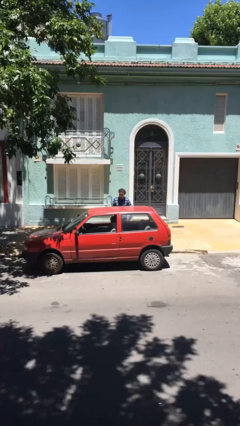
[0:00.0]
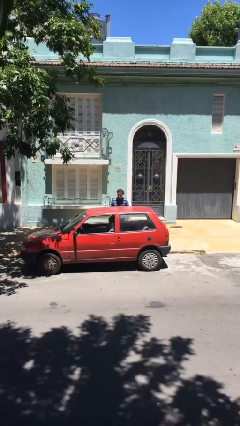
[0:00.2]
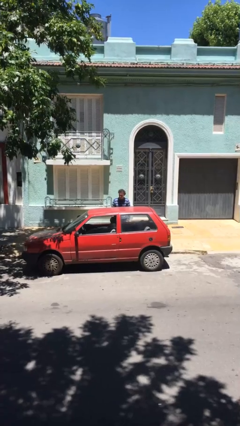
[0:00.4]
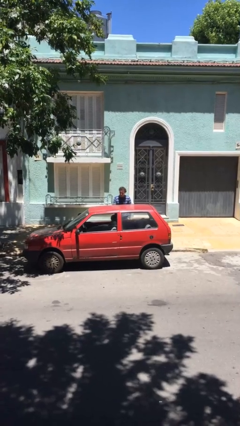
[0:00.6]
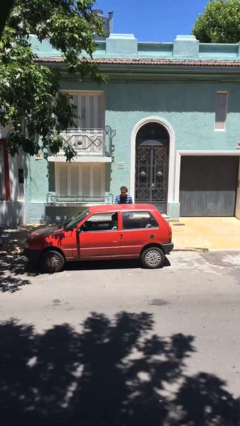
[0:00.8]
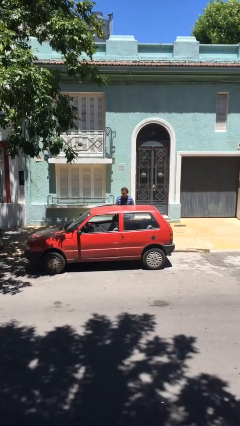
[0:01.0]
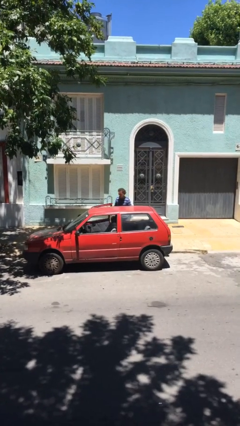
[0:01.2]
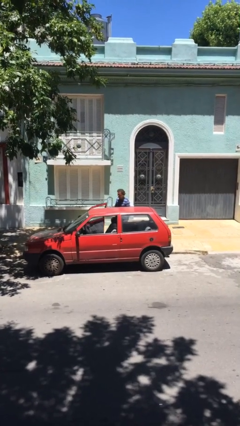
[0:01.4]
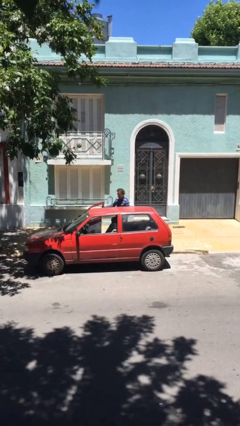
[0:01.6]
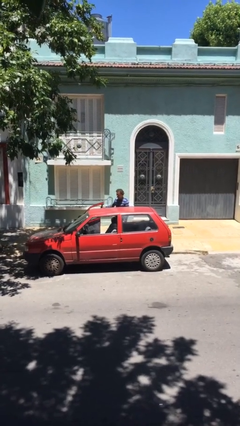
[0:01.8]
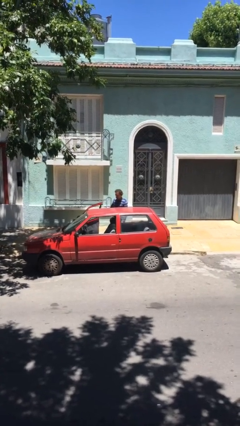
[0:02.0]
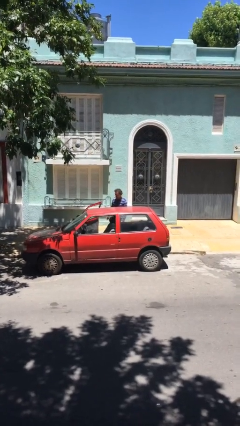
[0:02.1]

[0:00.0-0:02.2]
person opens car door

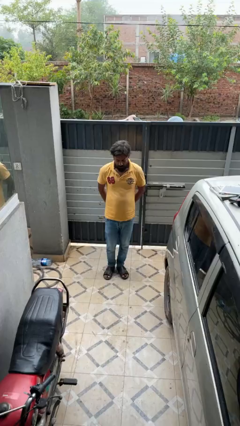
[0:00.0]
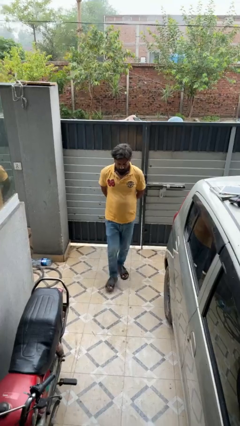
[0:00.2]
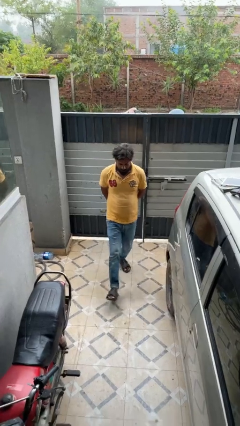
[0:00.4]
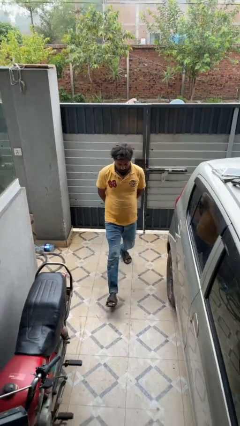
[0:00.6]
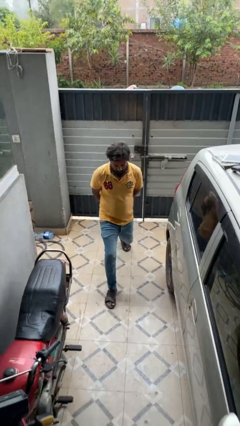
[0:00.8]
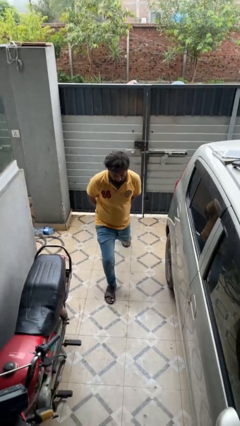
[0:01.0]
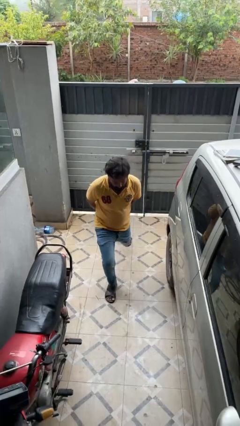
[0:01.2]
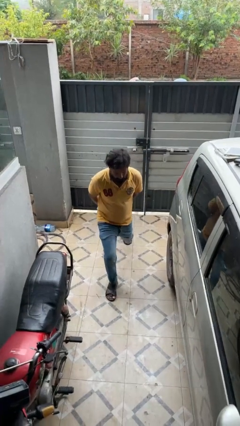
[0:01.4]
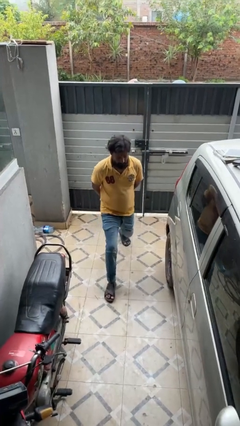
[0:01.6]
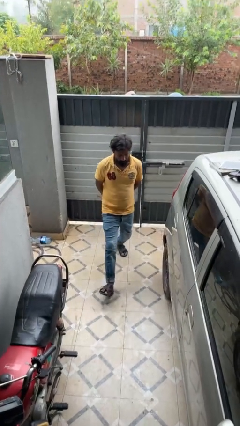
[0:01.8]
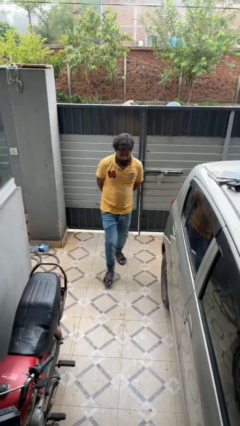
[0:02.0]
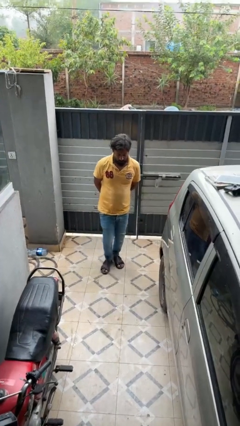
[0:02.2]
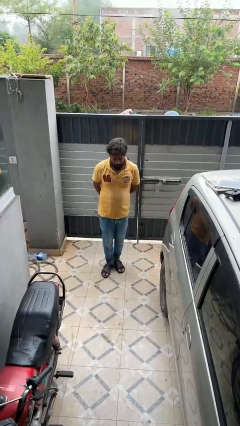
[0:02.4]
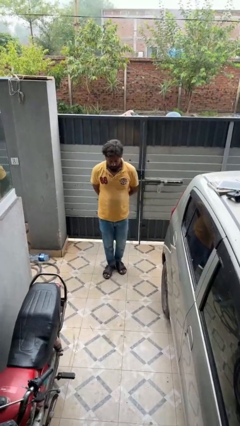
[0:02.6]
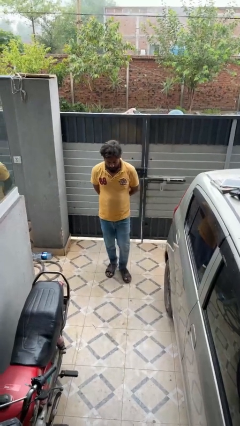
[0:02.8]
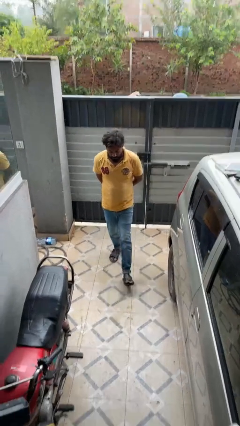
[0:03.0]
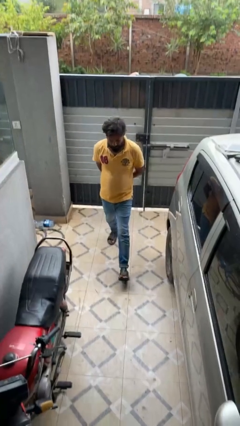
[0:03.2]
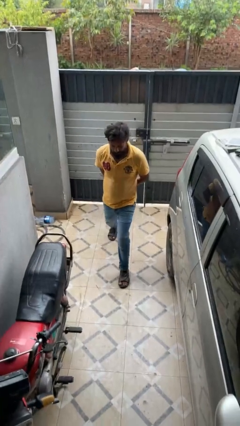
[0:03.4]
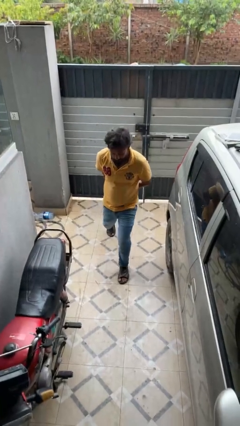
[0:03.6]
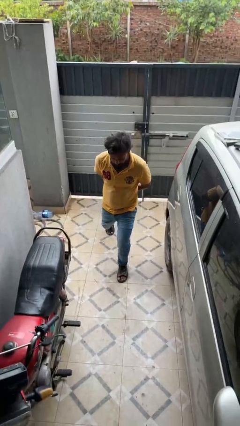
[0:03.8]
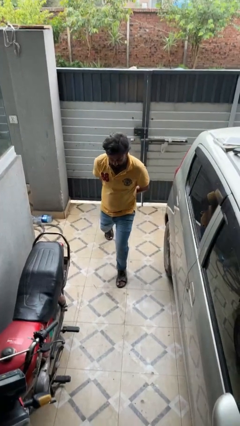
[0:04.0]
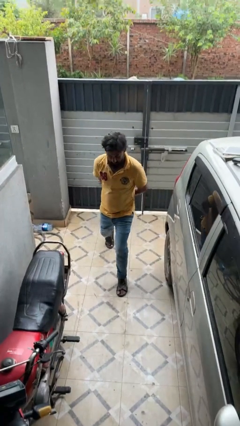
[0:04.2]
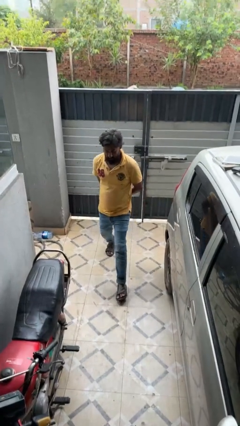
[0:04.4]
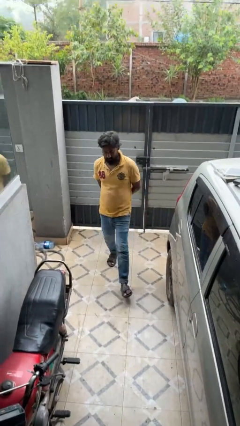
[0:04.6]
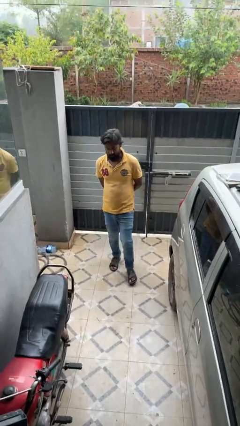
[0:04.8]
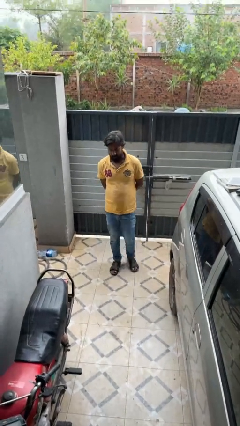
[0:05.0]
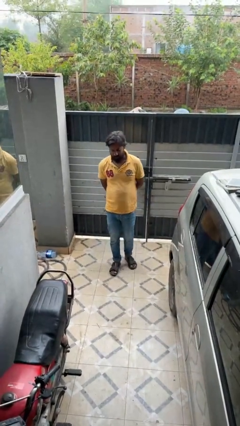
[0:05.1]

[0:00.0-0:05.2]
person exercises with lunges

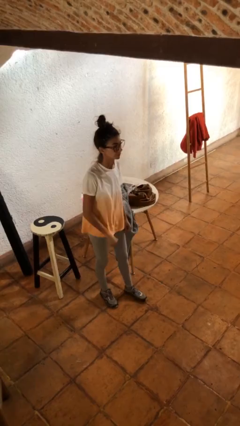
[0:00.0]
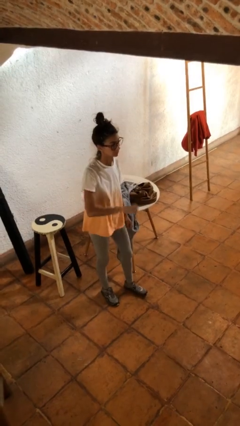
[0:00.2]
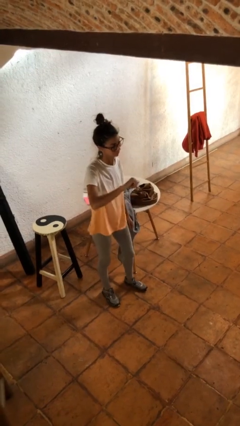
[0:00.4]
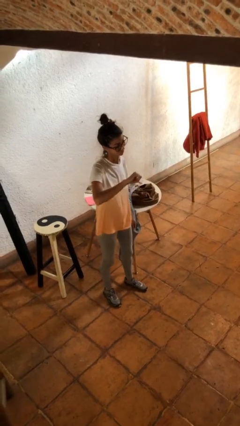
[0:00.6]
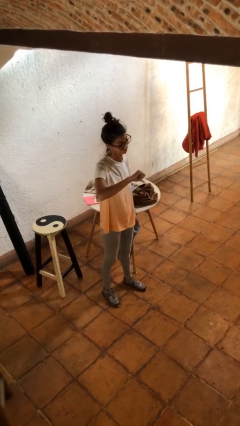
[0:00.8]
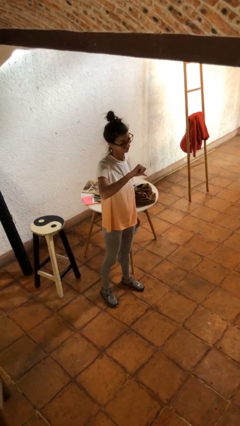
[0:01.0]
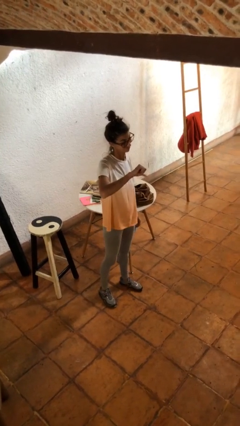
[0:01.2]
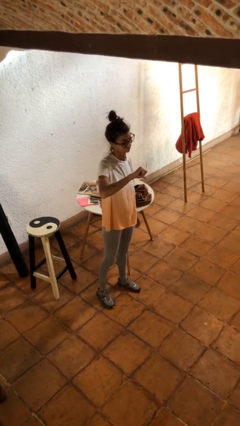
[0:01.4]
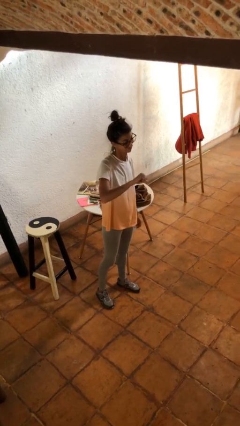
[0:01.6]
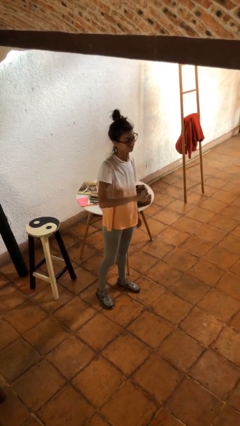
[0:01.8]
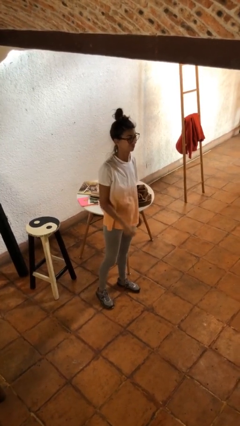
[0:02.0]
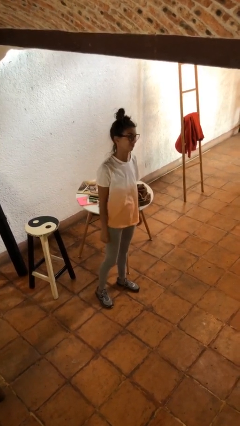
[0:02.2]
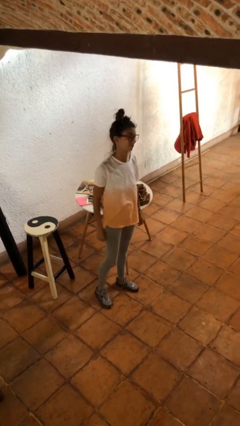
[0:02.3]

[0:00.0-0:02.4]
person gestures thumbs down

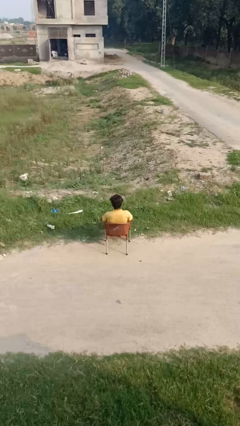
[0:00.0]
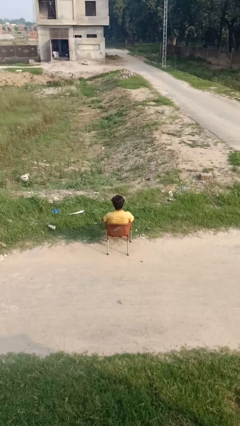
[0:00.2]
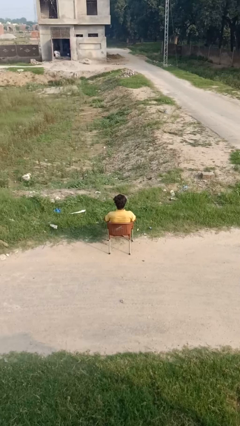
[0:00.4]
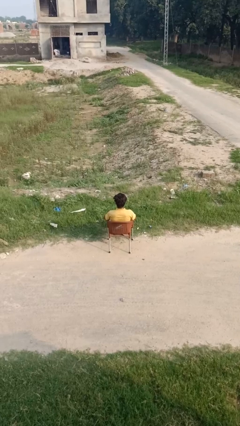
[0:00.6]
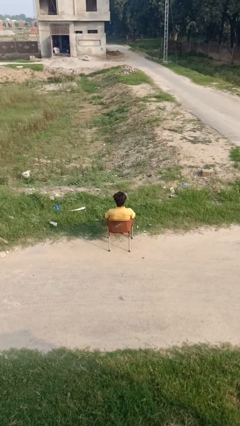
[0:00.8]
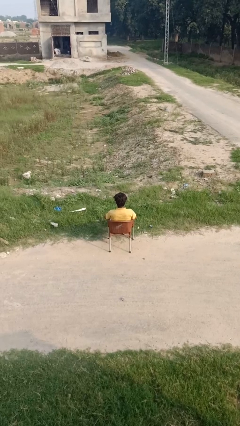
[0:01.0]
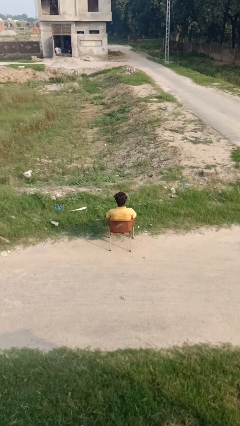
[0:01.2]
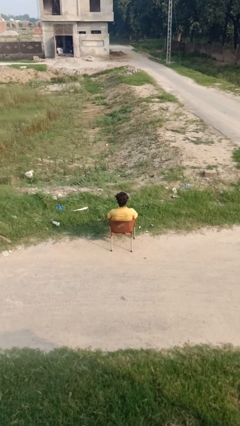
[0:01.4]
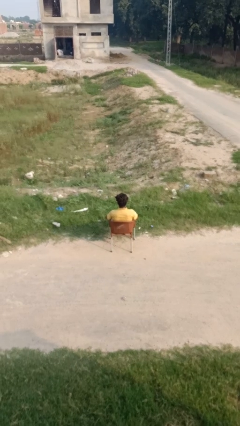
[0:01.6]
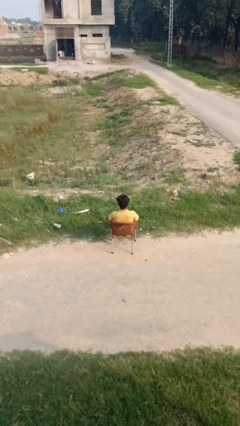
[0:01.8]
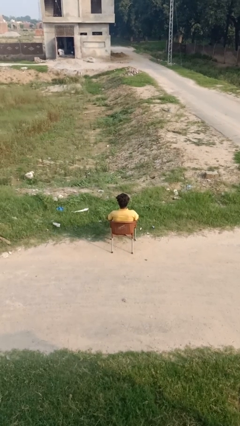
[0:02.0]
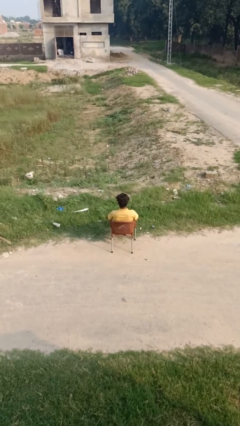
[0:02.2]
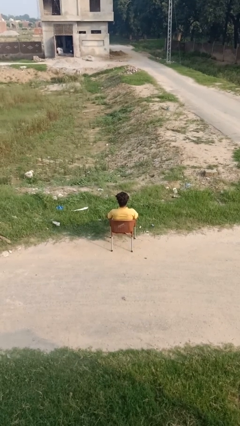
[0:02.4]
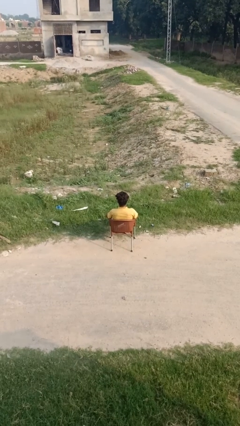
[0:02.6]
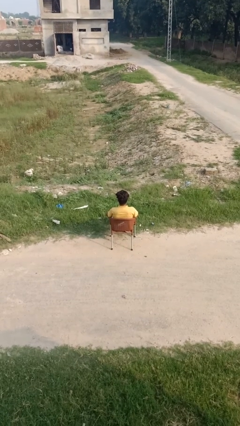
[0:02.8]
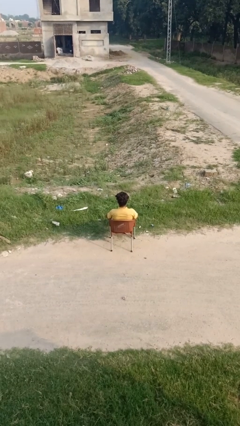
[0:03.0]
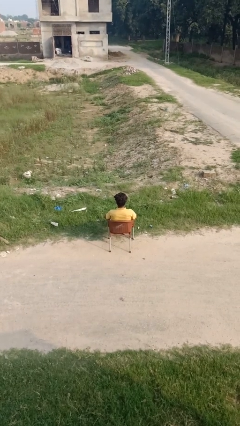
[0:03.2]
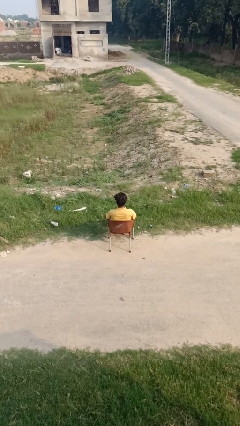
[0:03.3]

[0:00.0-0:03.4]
person shrugs

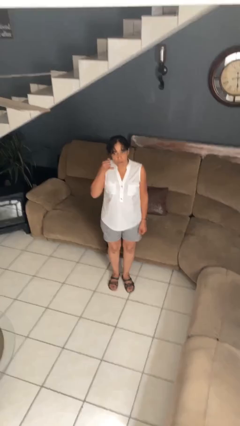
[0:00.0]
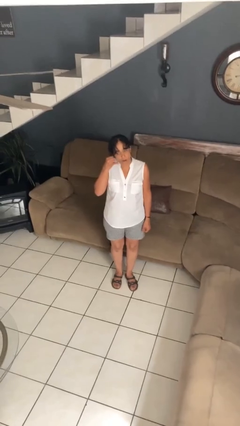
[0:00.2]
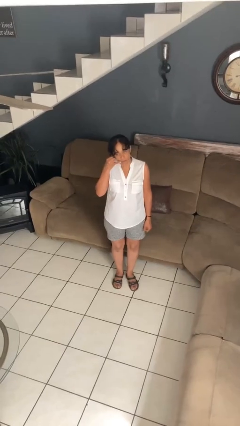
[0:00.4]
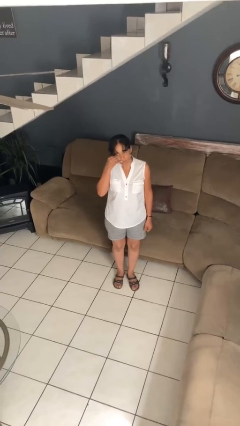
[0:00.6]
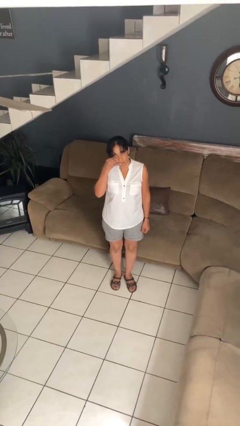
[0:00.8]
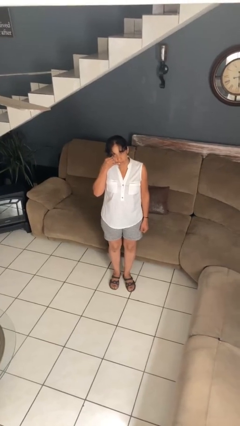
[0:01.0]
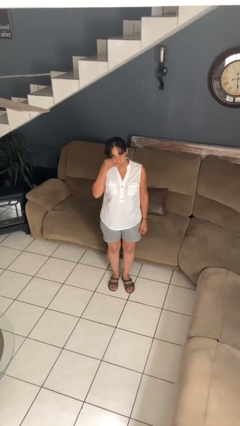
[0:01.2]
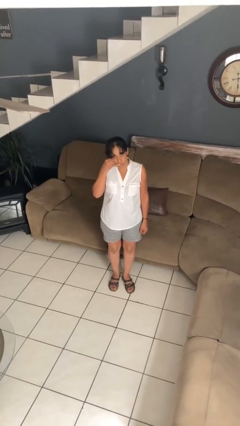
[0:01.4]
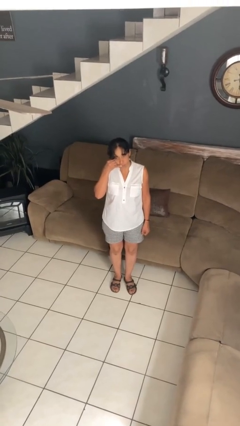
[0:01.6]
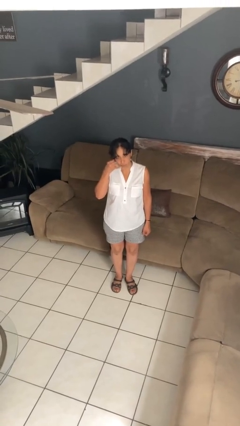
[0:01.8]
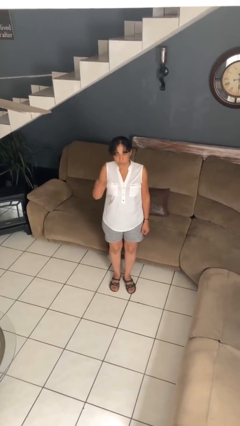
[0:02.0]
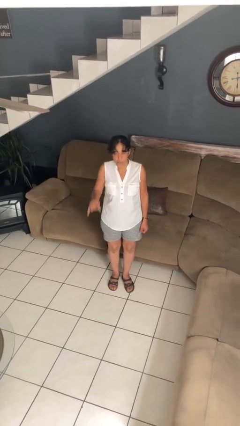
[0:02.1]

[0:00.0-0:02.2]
person gestures call me

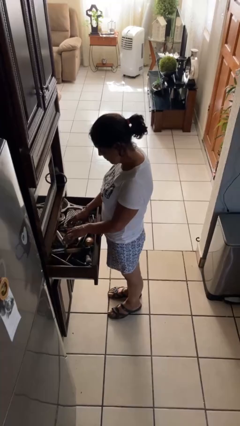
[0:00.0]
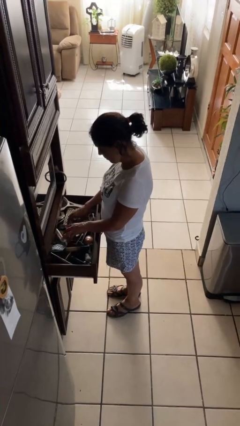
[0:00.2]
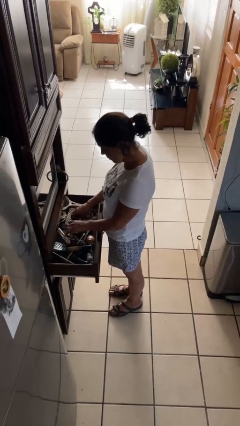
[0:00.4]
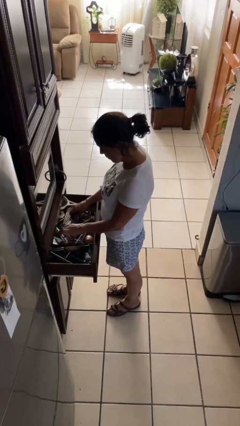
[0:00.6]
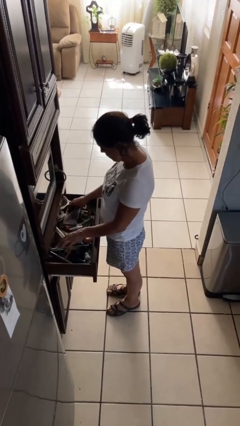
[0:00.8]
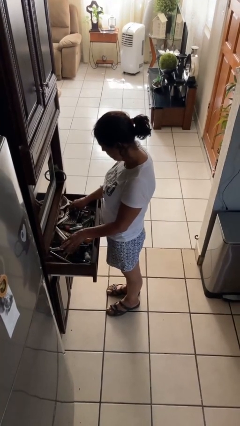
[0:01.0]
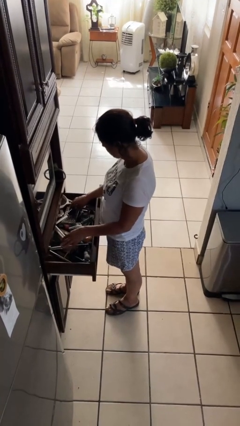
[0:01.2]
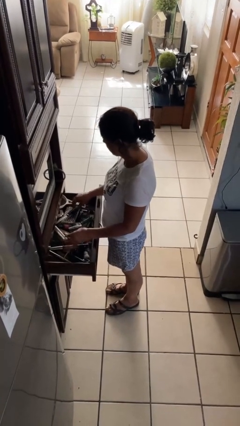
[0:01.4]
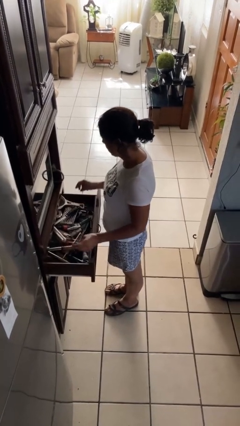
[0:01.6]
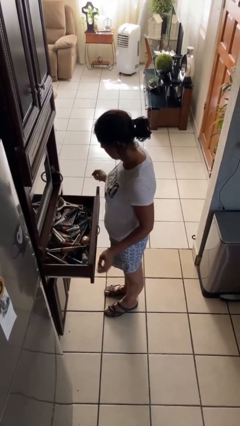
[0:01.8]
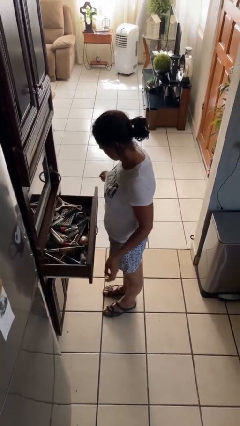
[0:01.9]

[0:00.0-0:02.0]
person searches in kitchen drawer
